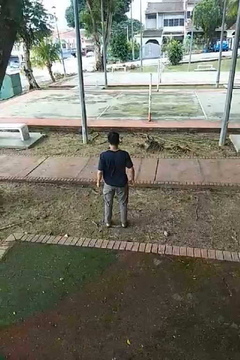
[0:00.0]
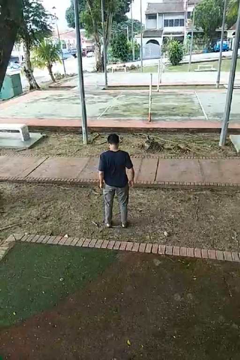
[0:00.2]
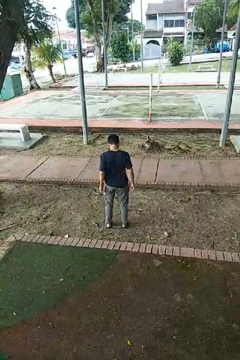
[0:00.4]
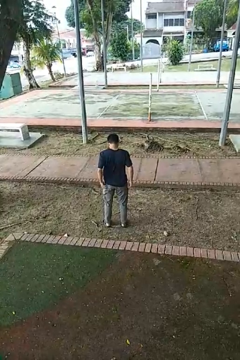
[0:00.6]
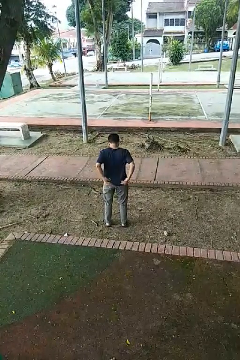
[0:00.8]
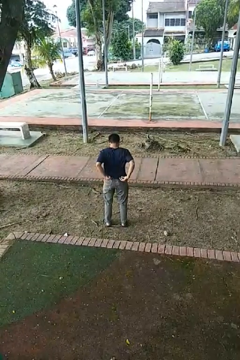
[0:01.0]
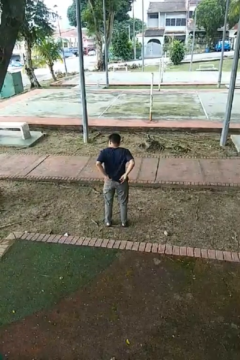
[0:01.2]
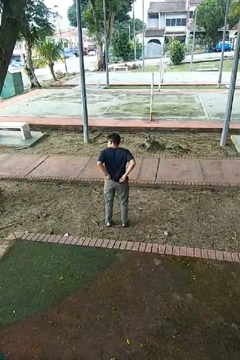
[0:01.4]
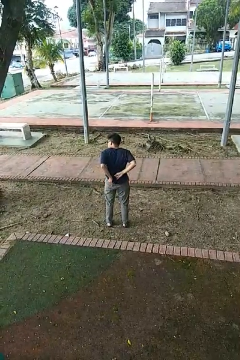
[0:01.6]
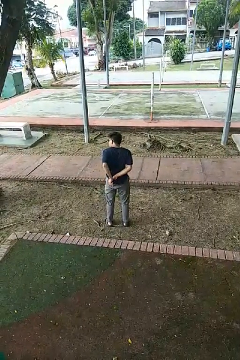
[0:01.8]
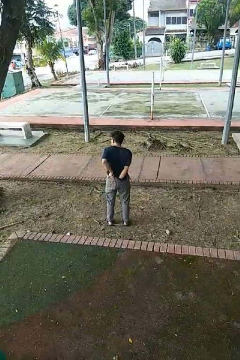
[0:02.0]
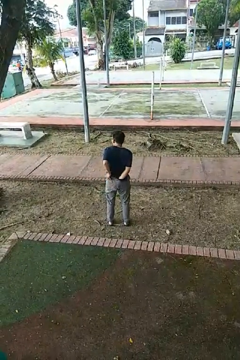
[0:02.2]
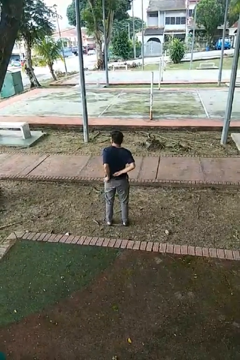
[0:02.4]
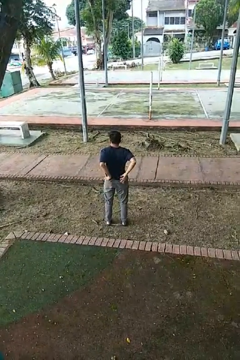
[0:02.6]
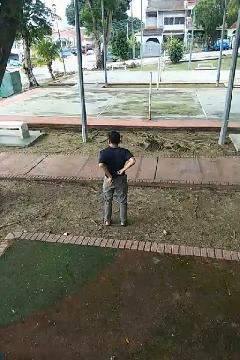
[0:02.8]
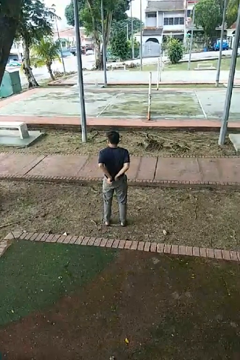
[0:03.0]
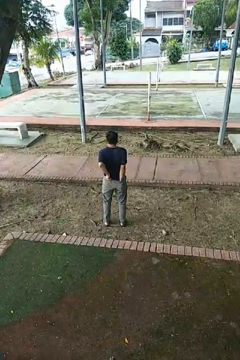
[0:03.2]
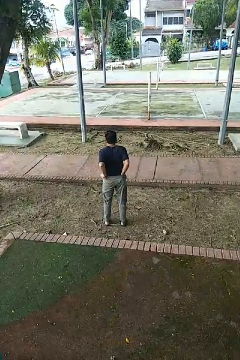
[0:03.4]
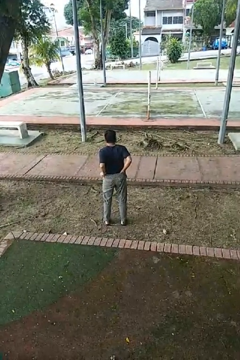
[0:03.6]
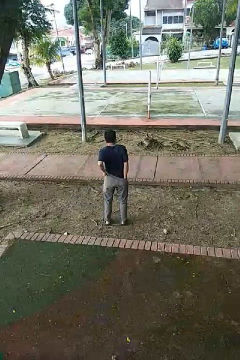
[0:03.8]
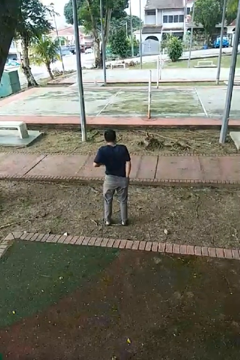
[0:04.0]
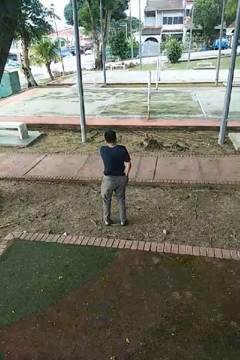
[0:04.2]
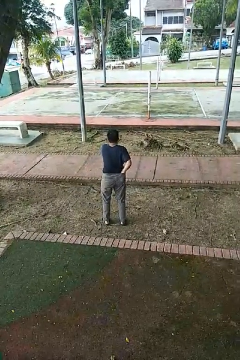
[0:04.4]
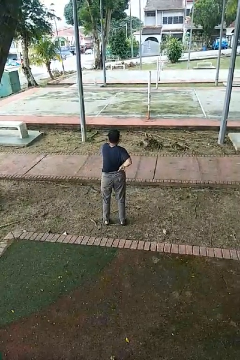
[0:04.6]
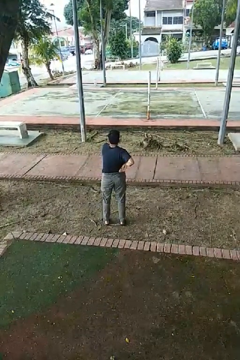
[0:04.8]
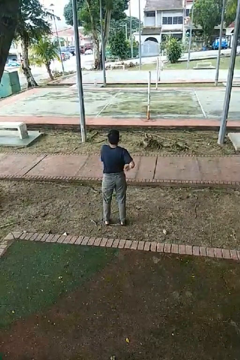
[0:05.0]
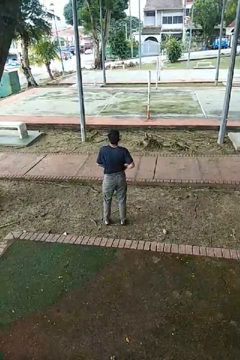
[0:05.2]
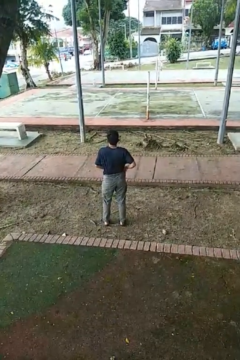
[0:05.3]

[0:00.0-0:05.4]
person tucks in shirt

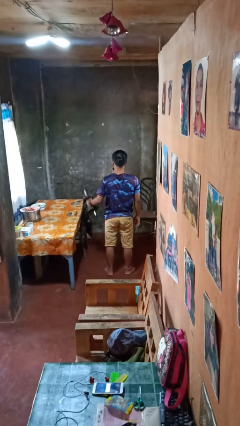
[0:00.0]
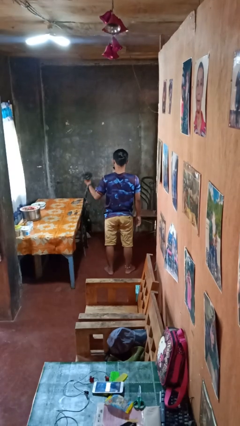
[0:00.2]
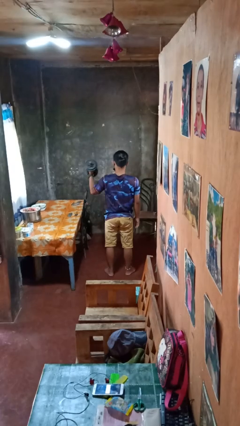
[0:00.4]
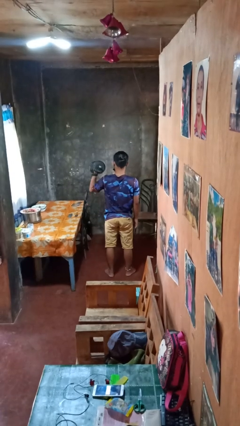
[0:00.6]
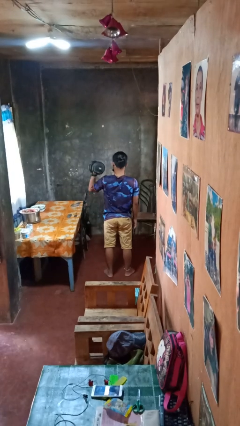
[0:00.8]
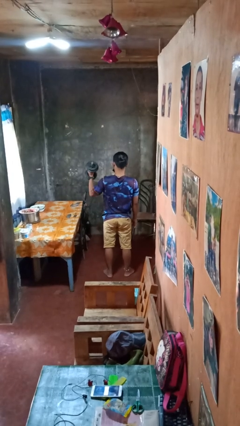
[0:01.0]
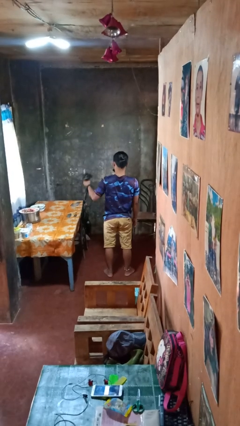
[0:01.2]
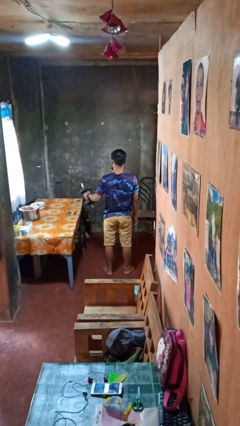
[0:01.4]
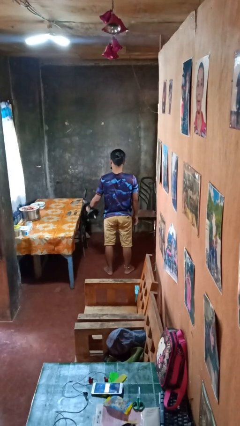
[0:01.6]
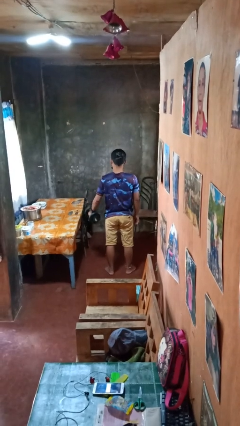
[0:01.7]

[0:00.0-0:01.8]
person lifts dumbbells

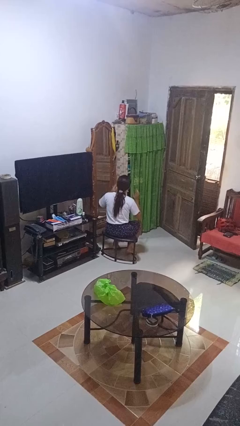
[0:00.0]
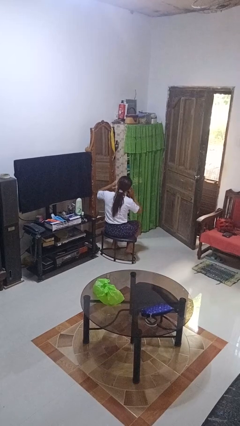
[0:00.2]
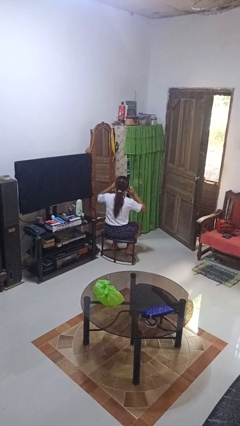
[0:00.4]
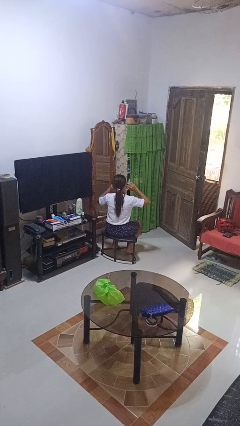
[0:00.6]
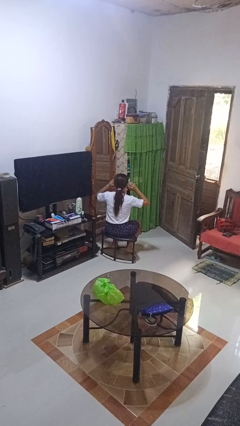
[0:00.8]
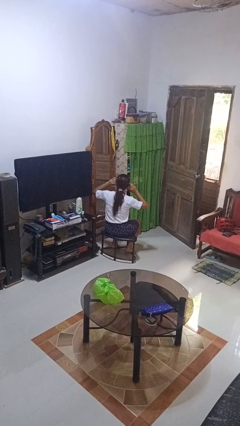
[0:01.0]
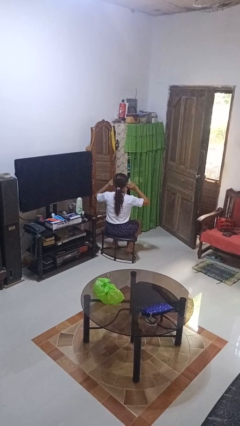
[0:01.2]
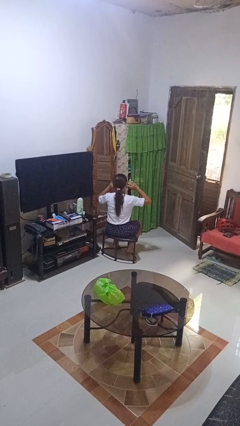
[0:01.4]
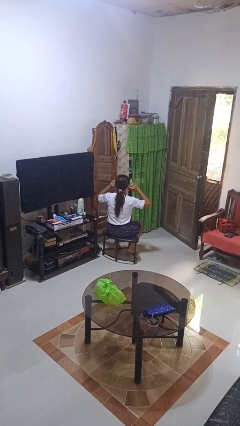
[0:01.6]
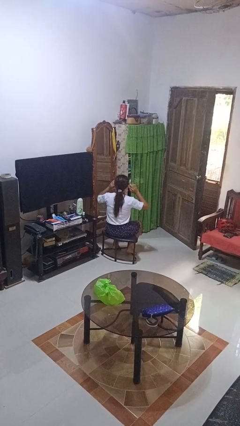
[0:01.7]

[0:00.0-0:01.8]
person puts fingers in ear

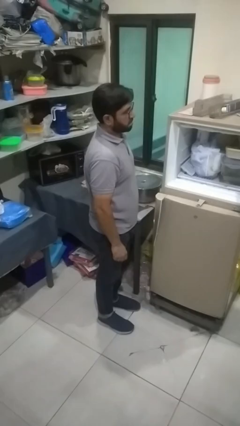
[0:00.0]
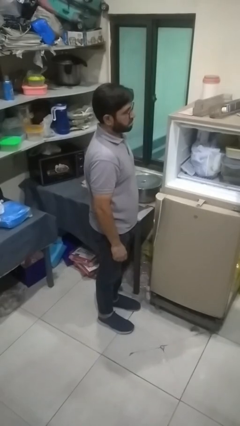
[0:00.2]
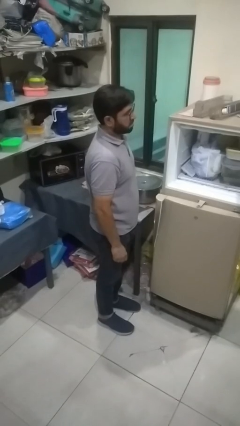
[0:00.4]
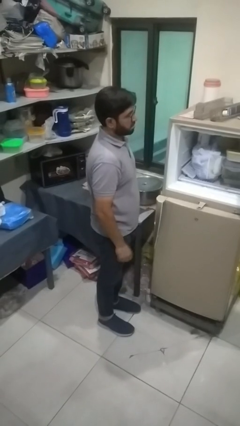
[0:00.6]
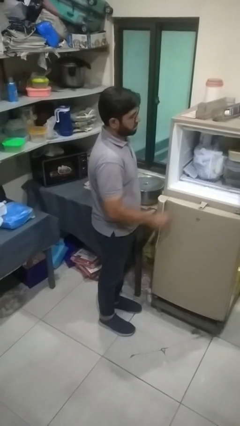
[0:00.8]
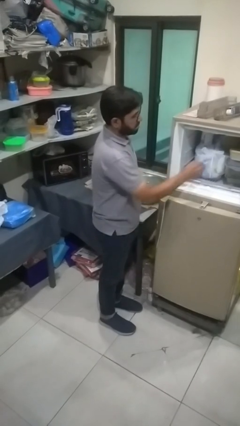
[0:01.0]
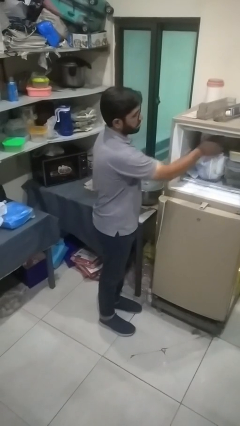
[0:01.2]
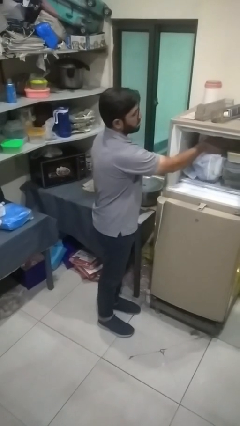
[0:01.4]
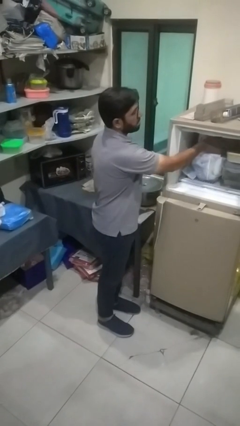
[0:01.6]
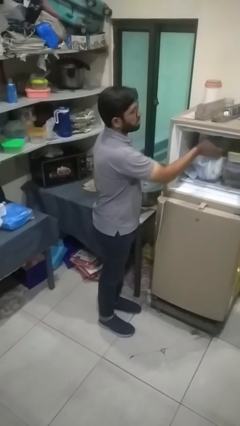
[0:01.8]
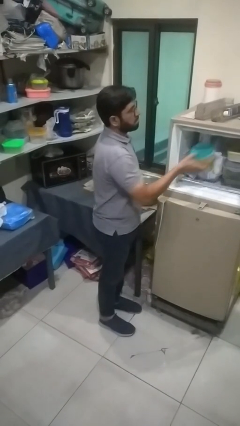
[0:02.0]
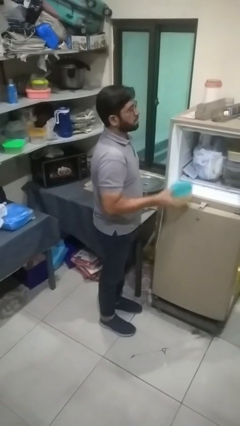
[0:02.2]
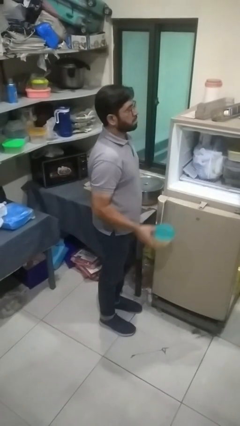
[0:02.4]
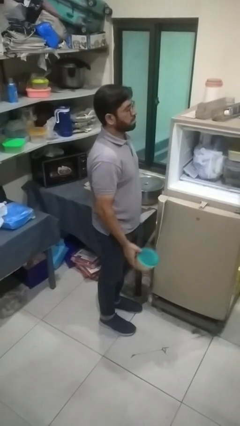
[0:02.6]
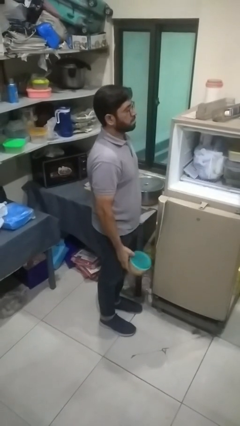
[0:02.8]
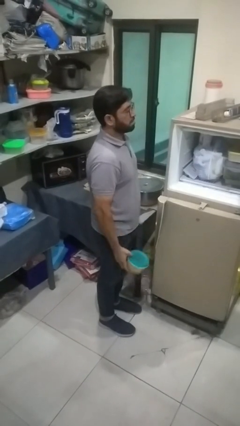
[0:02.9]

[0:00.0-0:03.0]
person takes object from refrigerator

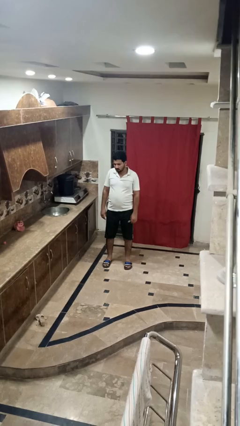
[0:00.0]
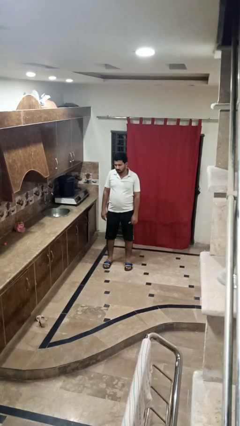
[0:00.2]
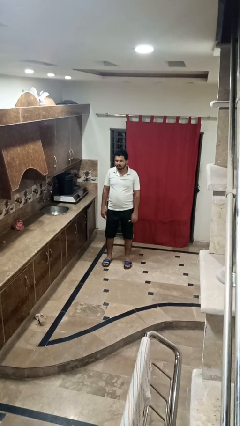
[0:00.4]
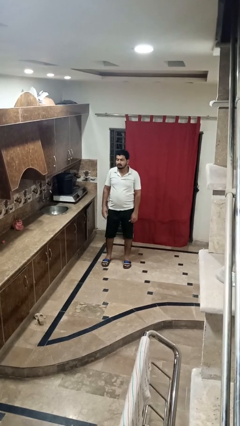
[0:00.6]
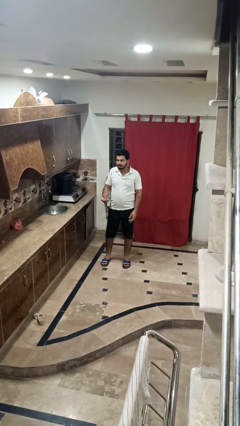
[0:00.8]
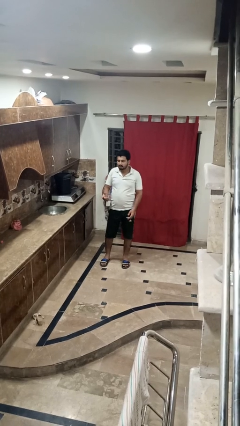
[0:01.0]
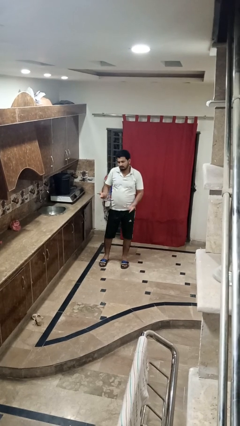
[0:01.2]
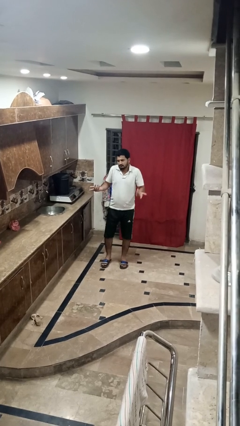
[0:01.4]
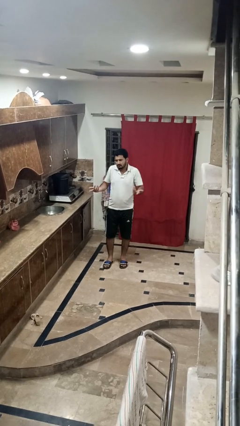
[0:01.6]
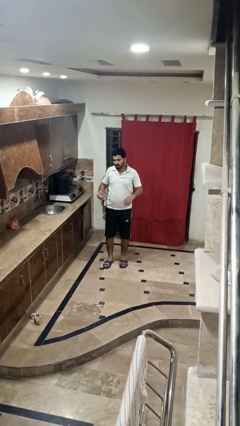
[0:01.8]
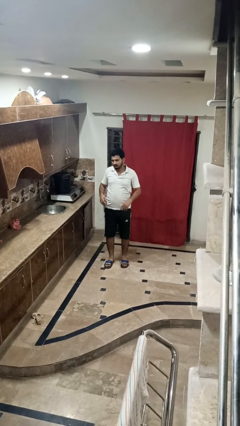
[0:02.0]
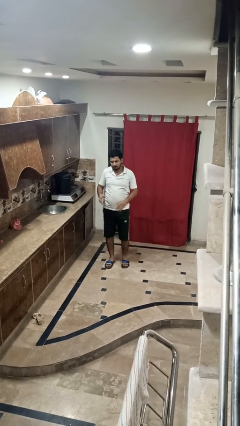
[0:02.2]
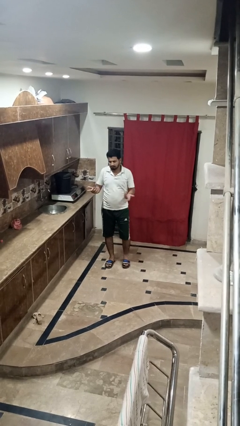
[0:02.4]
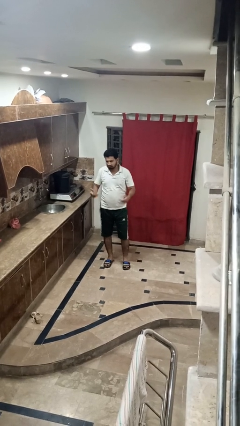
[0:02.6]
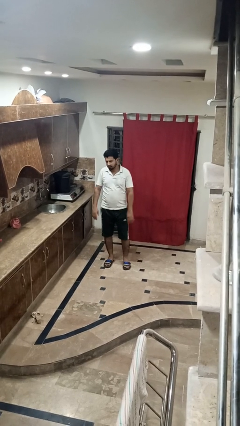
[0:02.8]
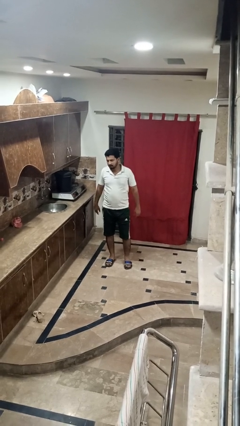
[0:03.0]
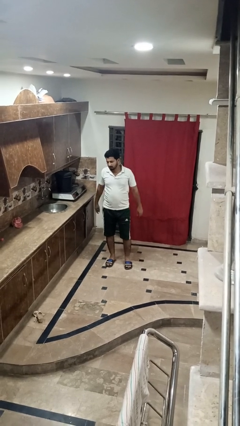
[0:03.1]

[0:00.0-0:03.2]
person shrugs

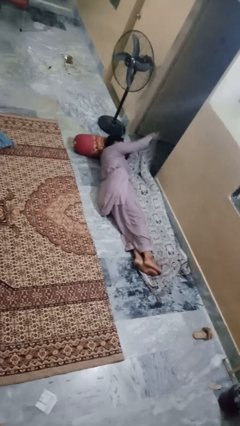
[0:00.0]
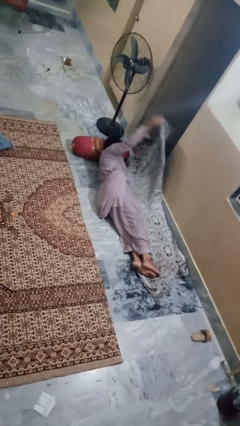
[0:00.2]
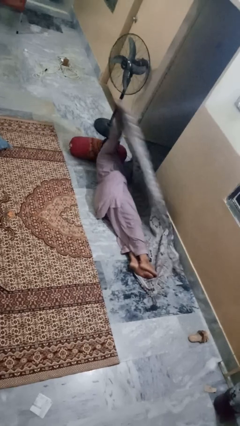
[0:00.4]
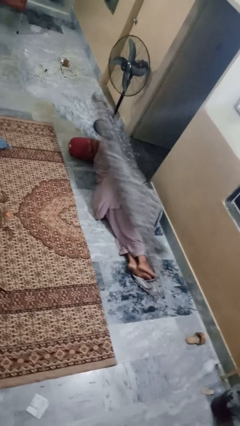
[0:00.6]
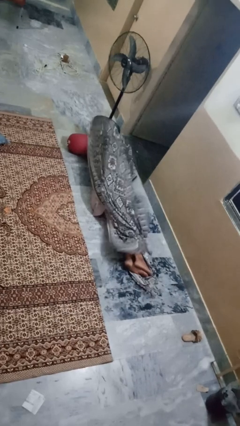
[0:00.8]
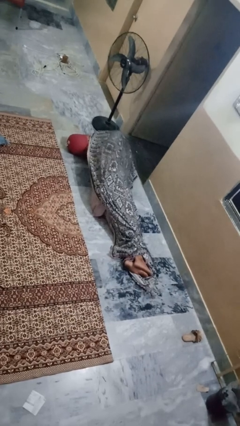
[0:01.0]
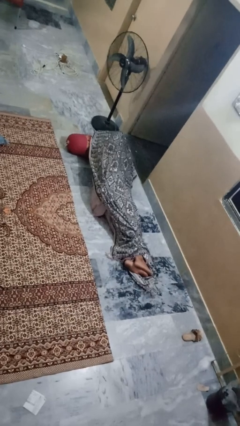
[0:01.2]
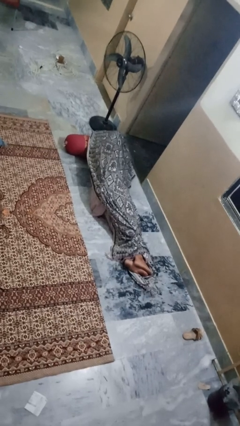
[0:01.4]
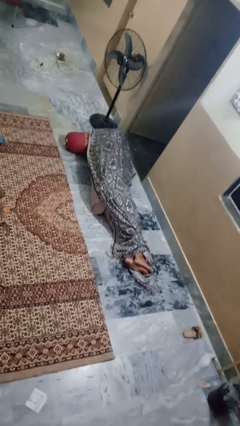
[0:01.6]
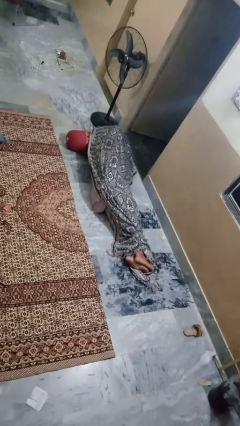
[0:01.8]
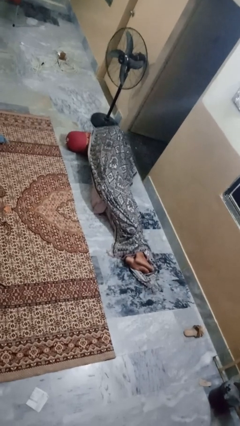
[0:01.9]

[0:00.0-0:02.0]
person covers with blanket

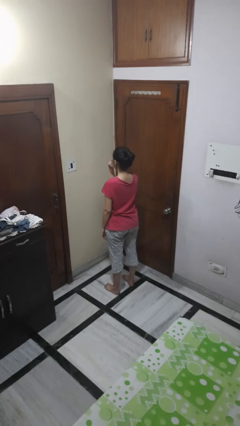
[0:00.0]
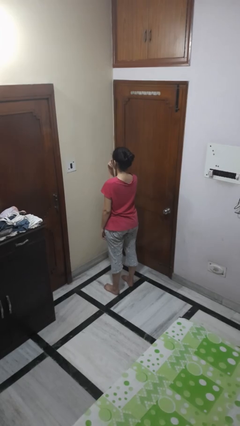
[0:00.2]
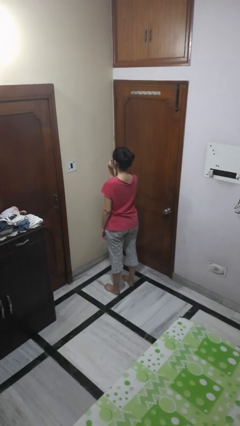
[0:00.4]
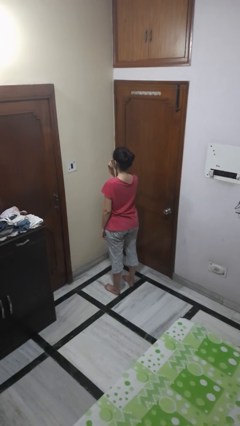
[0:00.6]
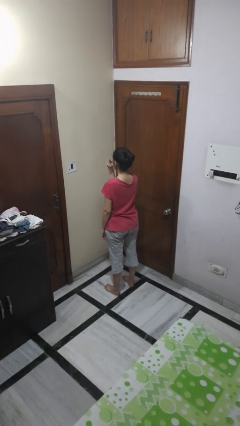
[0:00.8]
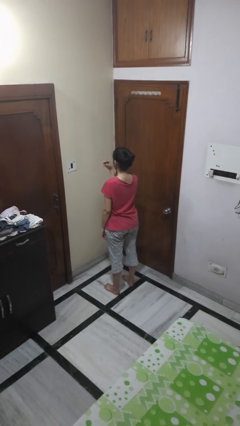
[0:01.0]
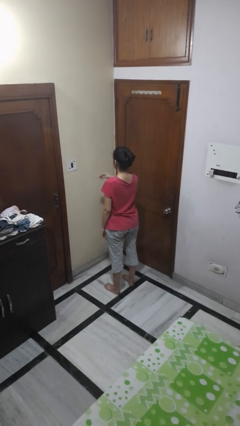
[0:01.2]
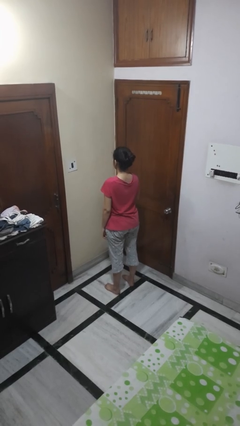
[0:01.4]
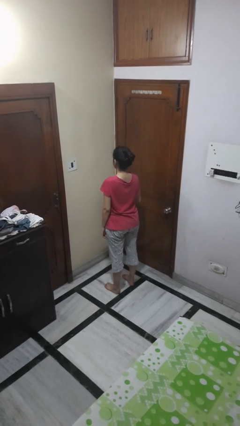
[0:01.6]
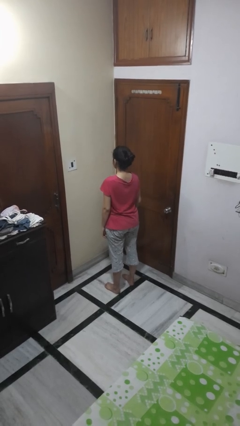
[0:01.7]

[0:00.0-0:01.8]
person gestures watch closely
